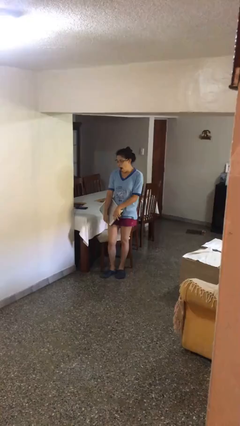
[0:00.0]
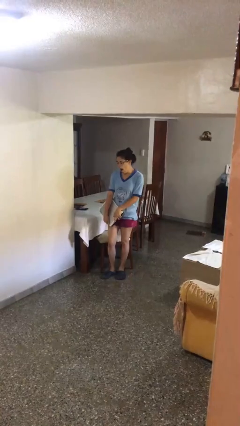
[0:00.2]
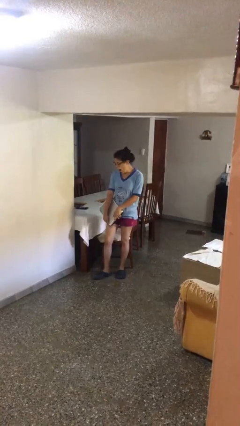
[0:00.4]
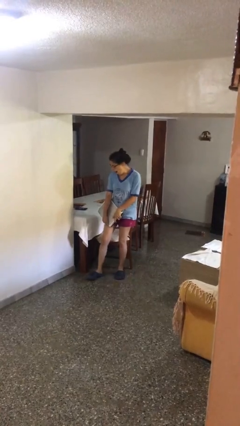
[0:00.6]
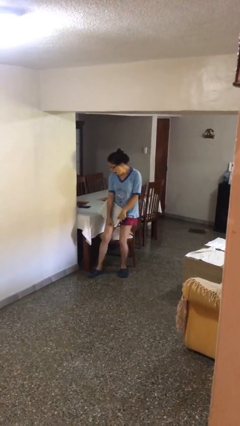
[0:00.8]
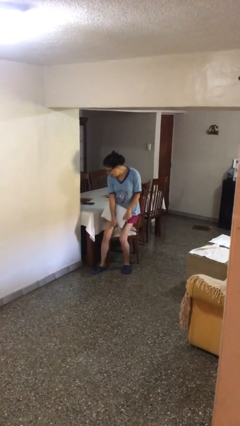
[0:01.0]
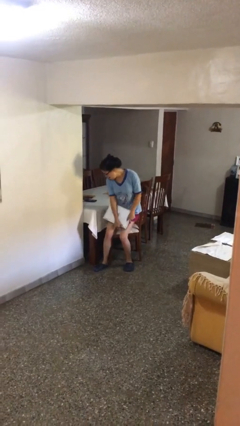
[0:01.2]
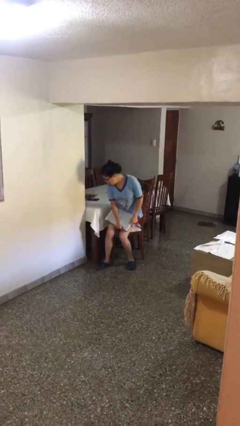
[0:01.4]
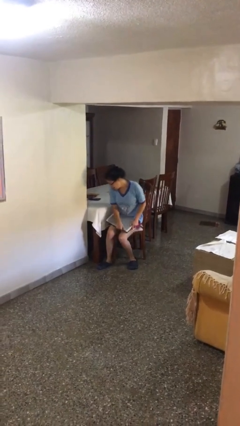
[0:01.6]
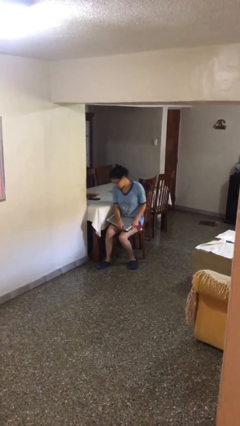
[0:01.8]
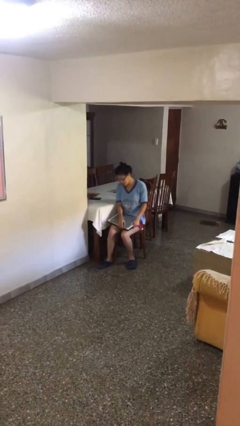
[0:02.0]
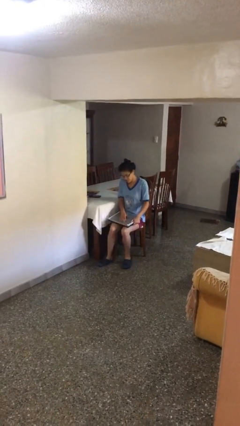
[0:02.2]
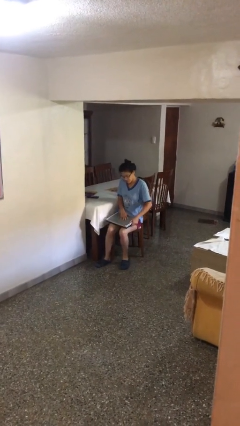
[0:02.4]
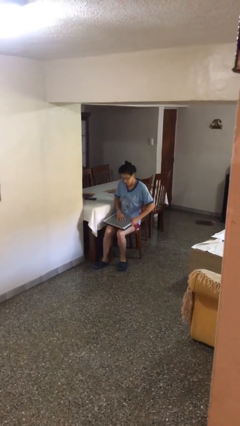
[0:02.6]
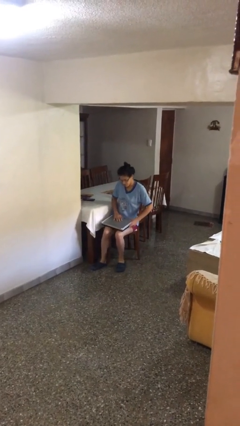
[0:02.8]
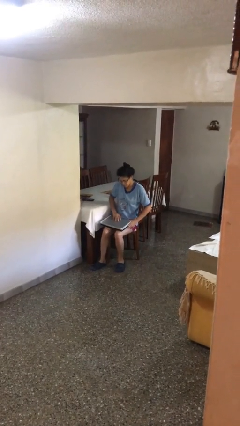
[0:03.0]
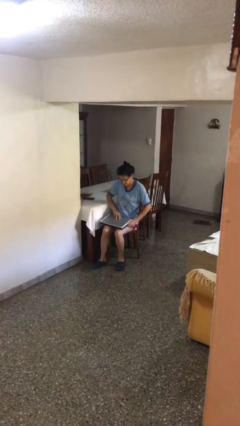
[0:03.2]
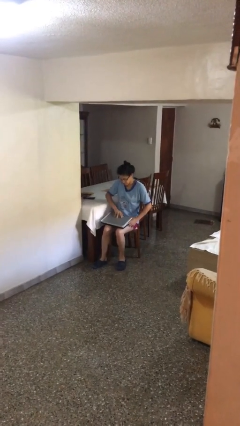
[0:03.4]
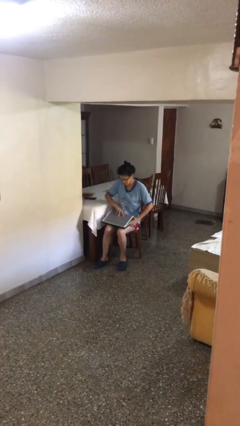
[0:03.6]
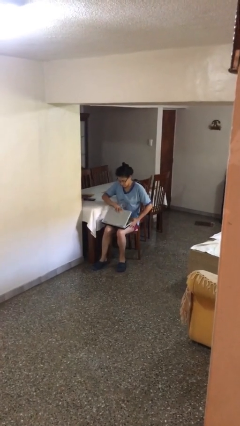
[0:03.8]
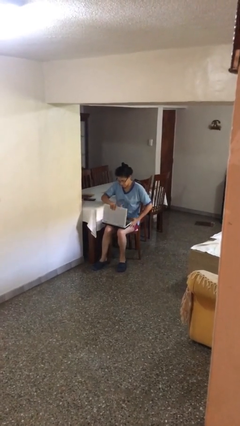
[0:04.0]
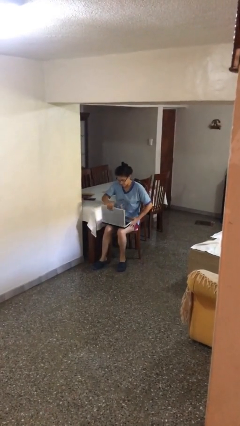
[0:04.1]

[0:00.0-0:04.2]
person sits down

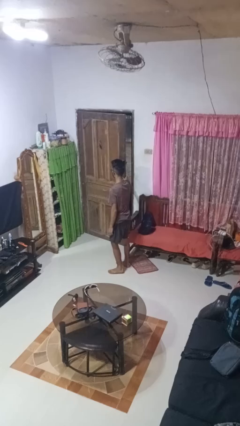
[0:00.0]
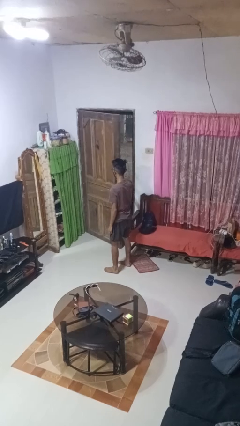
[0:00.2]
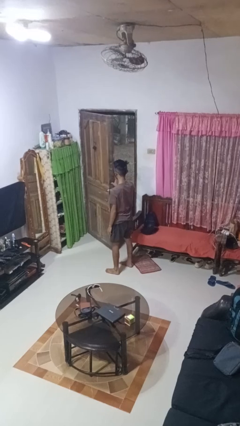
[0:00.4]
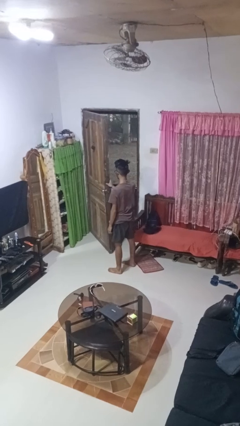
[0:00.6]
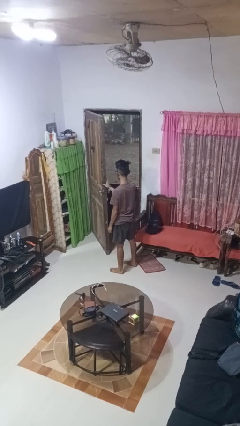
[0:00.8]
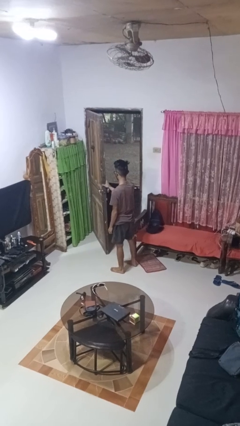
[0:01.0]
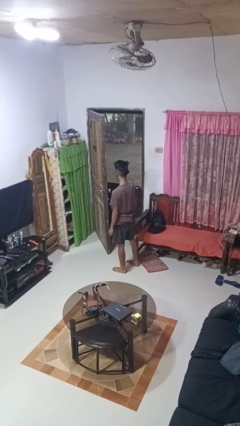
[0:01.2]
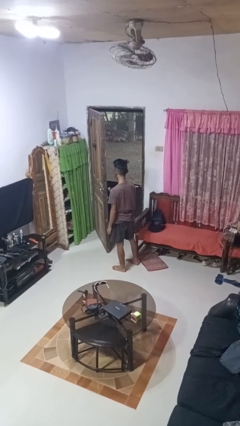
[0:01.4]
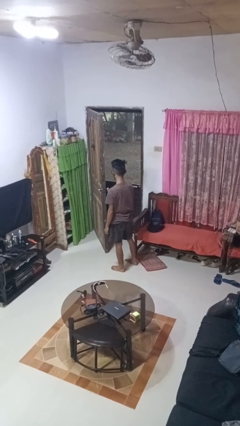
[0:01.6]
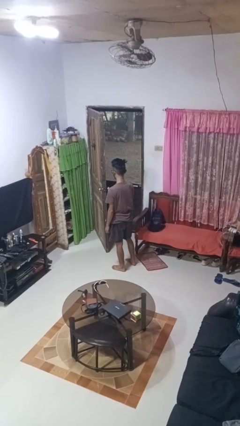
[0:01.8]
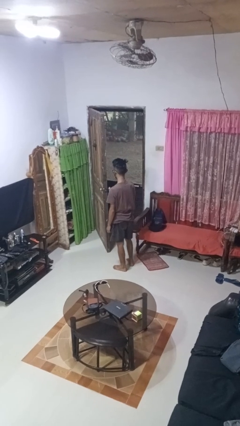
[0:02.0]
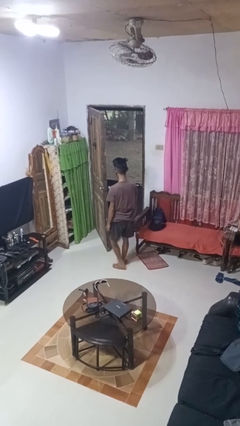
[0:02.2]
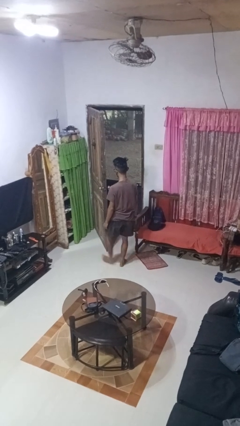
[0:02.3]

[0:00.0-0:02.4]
person opens facility door

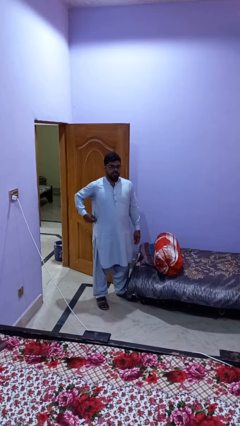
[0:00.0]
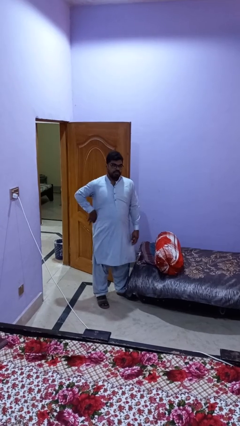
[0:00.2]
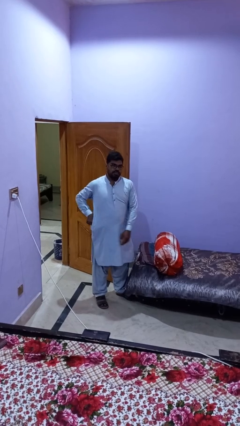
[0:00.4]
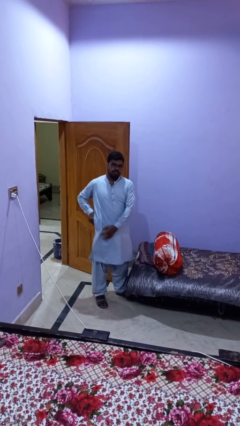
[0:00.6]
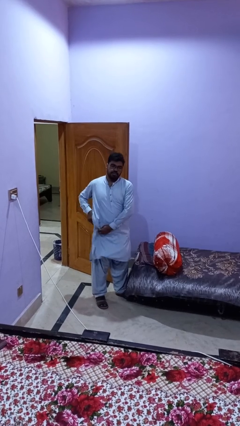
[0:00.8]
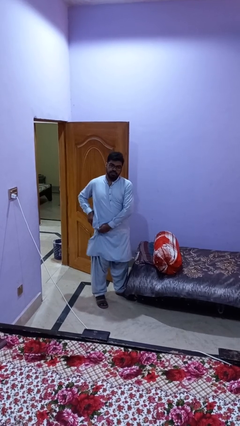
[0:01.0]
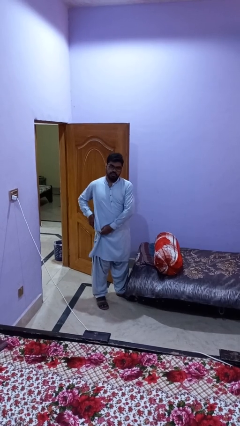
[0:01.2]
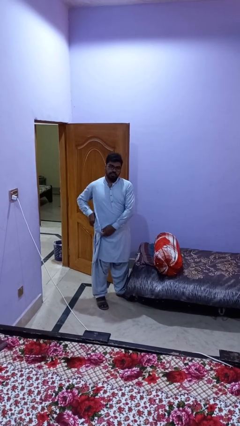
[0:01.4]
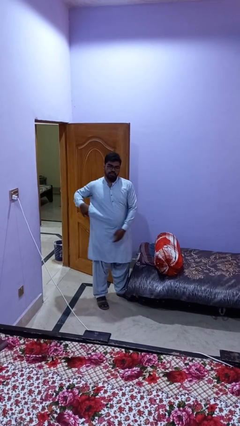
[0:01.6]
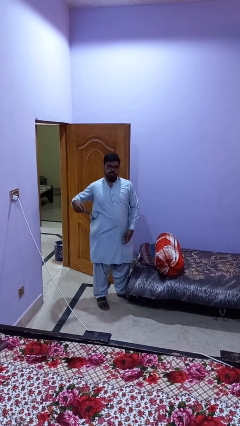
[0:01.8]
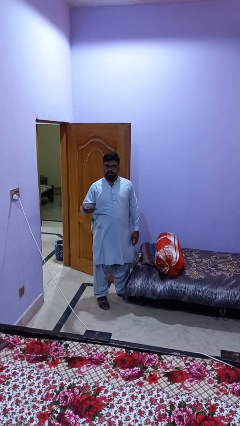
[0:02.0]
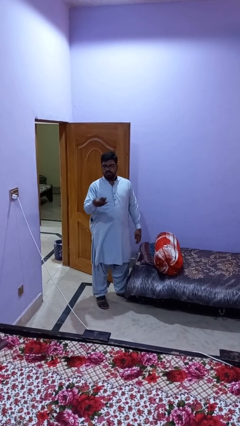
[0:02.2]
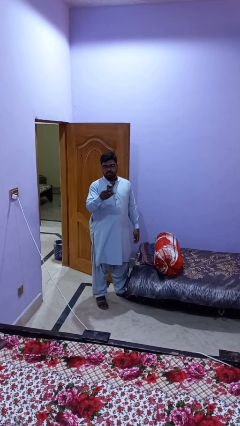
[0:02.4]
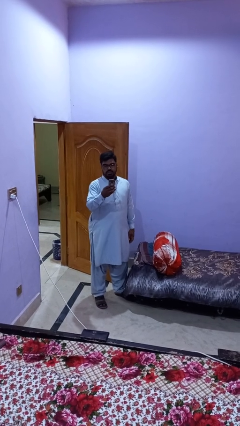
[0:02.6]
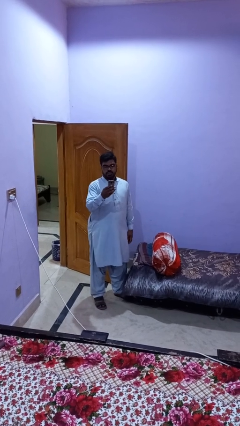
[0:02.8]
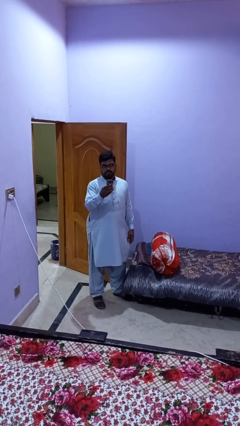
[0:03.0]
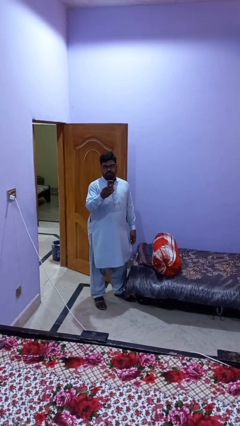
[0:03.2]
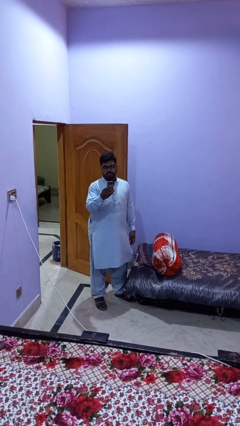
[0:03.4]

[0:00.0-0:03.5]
person takes phone from pocket

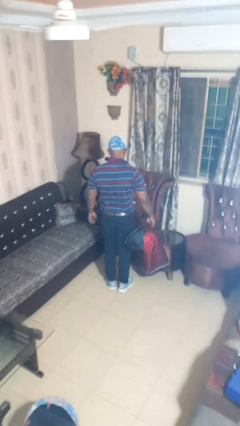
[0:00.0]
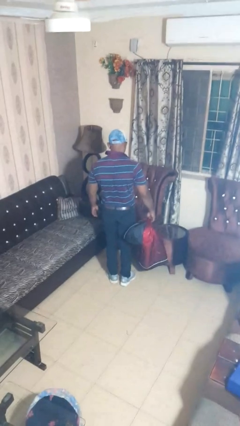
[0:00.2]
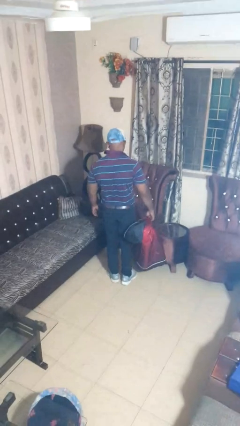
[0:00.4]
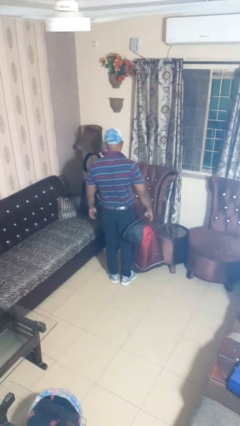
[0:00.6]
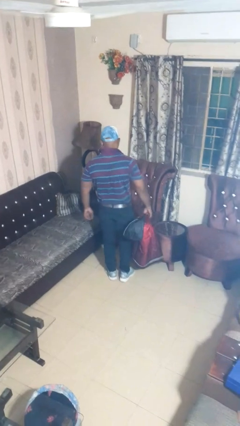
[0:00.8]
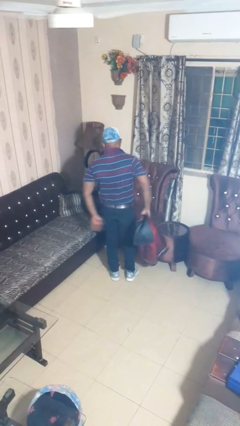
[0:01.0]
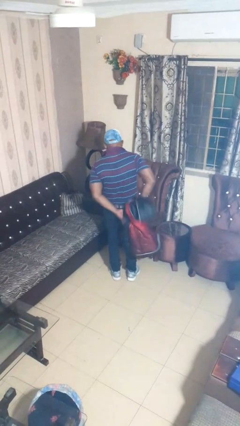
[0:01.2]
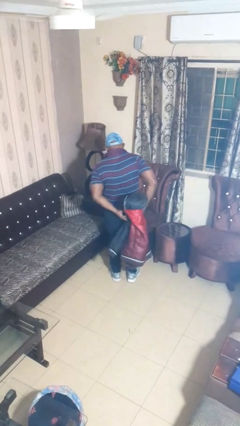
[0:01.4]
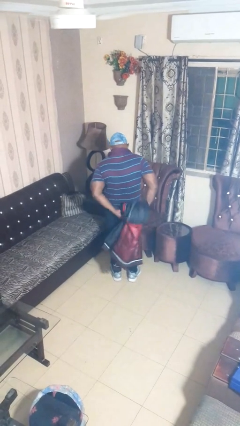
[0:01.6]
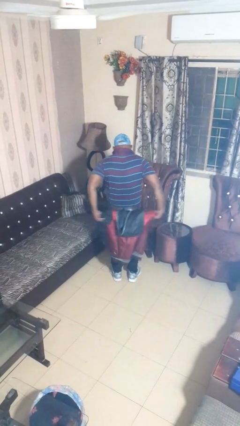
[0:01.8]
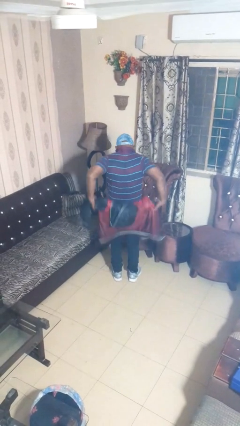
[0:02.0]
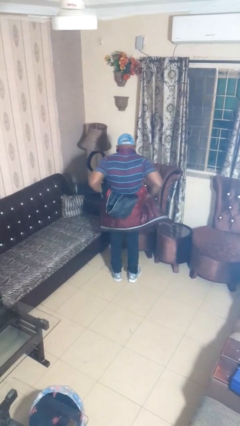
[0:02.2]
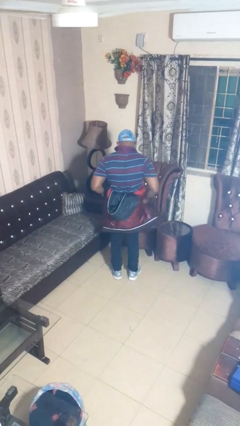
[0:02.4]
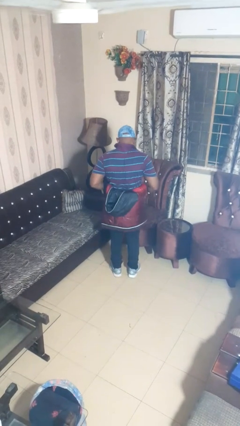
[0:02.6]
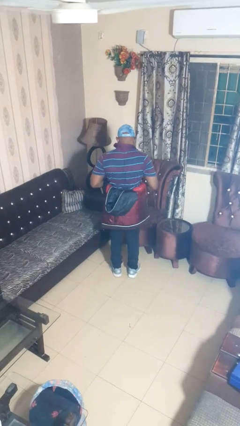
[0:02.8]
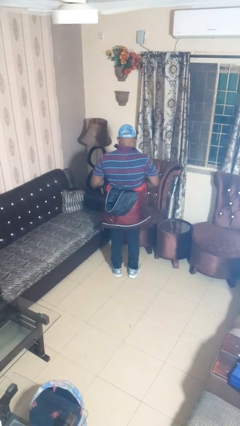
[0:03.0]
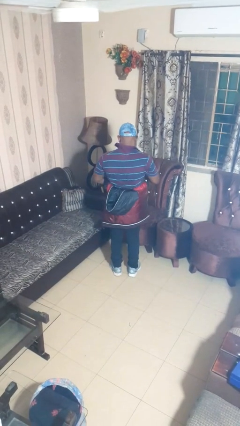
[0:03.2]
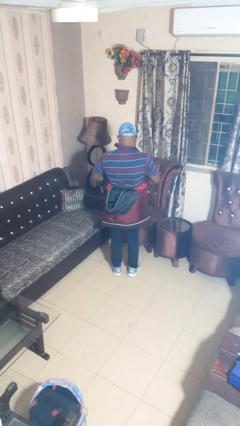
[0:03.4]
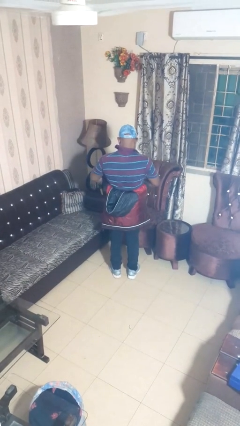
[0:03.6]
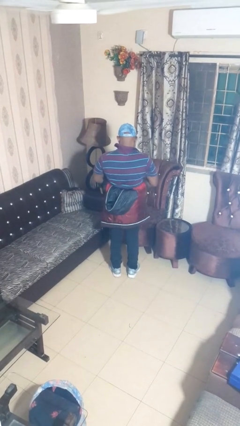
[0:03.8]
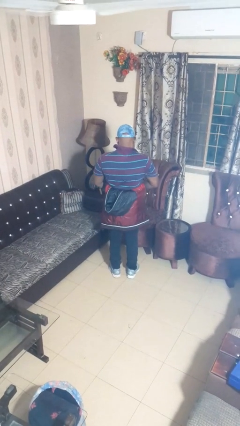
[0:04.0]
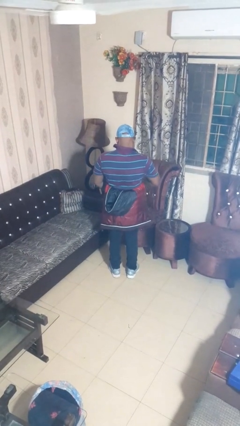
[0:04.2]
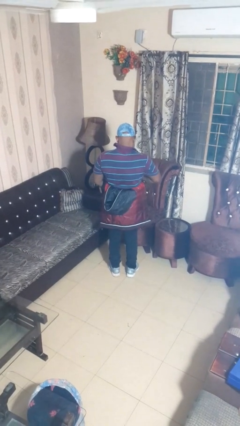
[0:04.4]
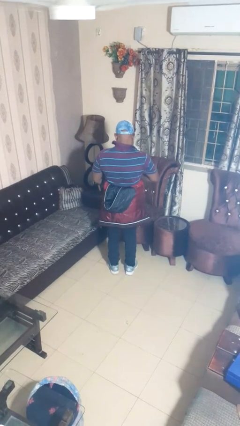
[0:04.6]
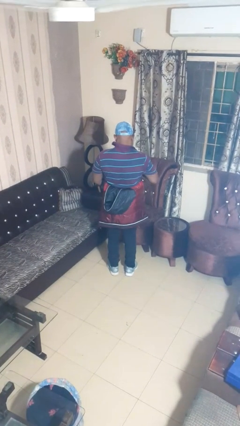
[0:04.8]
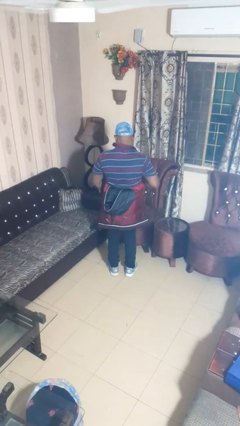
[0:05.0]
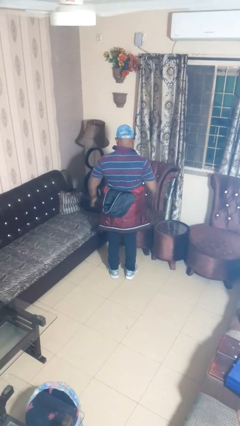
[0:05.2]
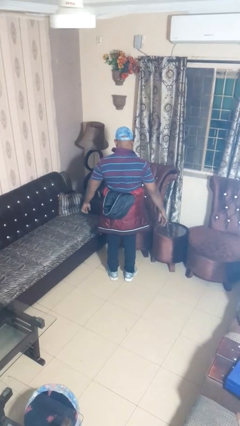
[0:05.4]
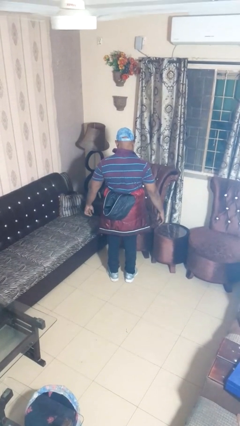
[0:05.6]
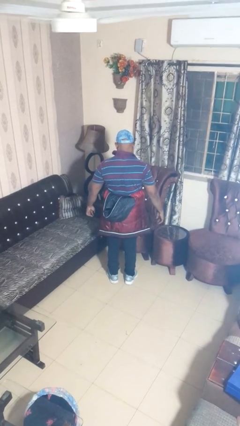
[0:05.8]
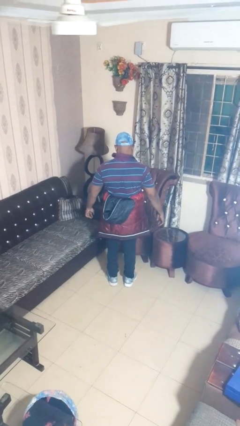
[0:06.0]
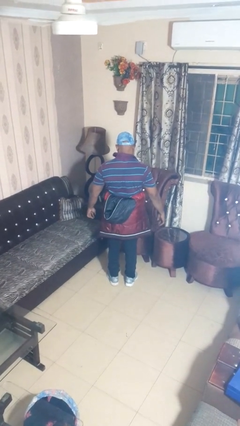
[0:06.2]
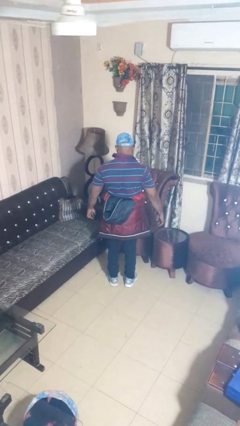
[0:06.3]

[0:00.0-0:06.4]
person ties jacket around waist

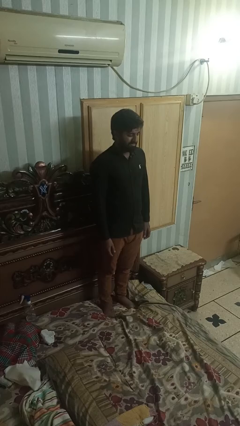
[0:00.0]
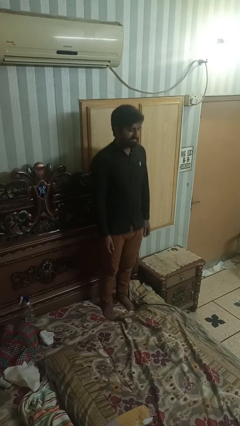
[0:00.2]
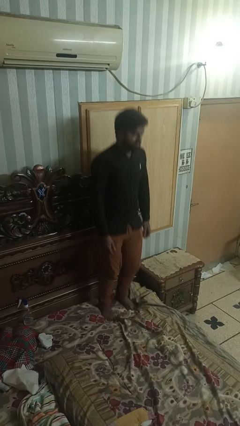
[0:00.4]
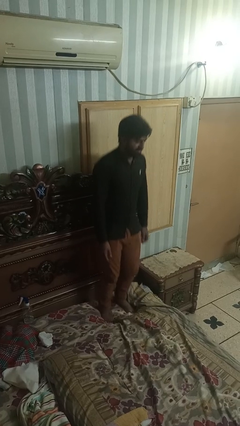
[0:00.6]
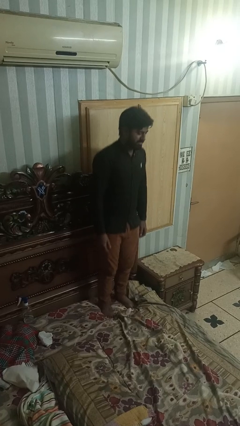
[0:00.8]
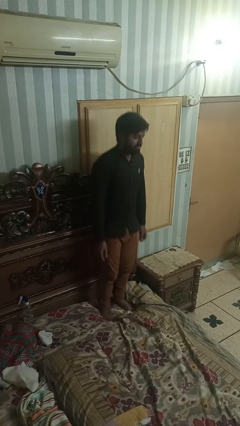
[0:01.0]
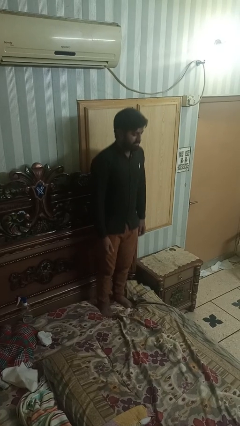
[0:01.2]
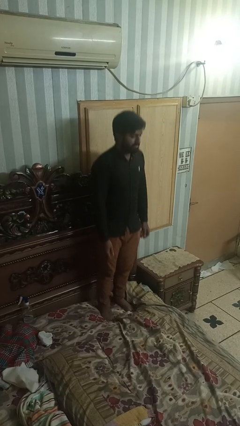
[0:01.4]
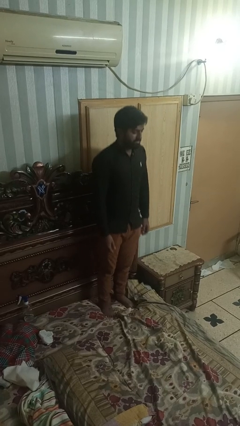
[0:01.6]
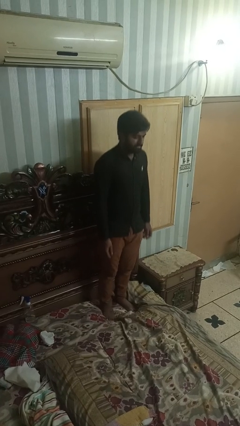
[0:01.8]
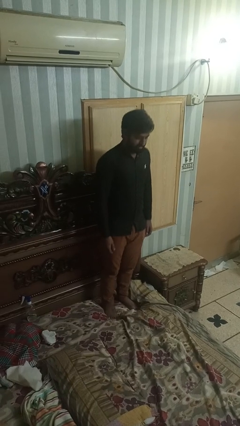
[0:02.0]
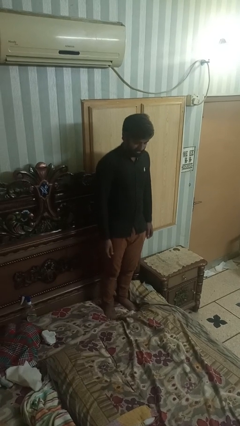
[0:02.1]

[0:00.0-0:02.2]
person jumps on bed
